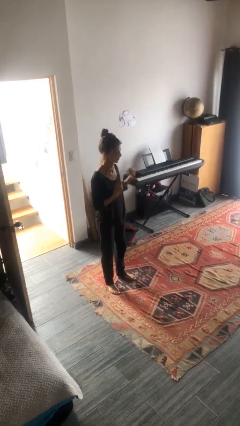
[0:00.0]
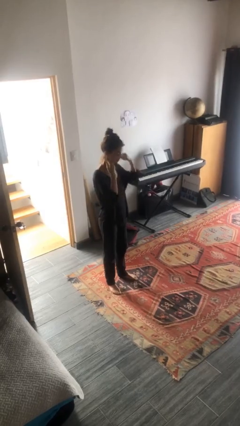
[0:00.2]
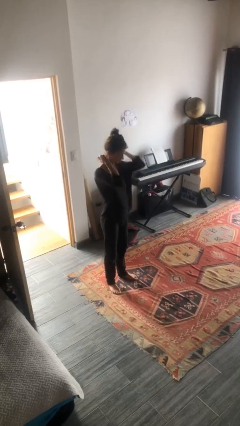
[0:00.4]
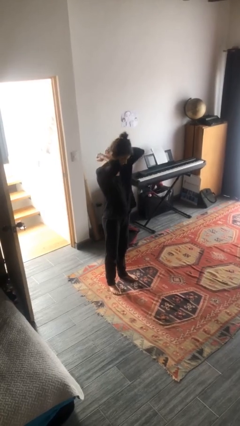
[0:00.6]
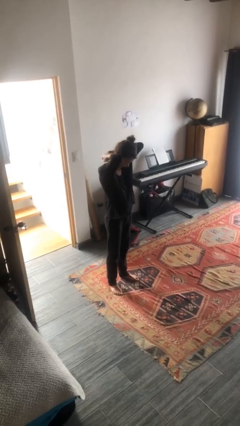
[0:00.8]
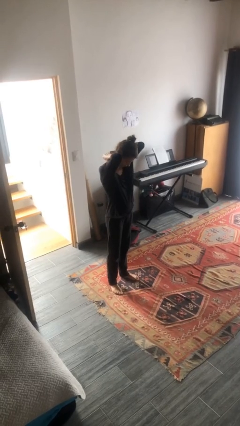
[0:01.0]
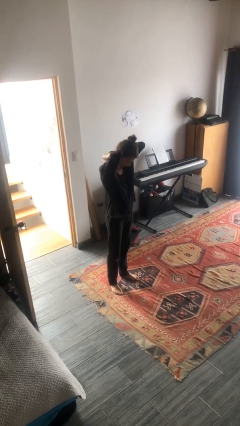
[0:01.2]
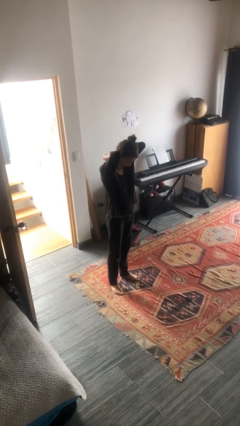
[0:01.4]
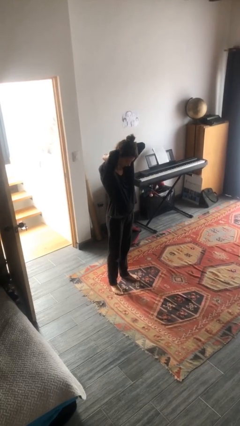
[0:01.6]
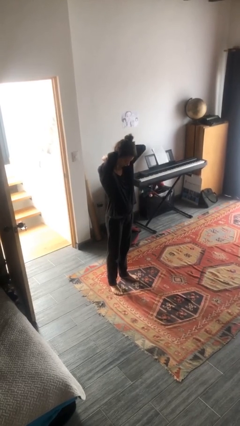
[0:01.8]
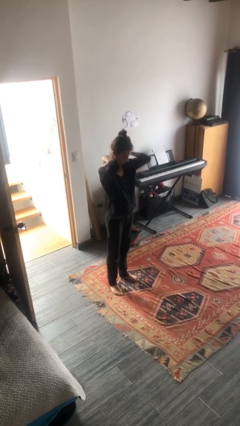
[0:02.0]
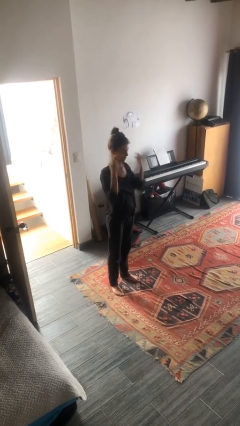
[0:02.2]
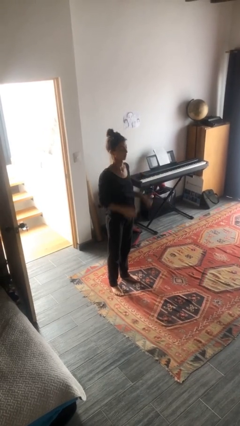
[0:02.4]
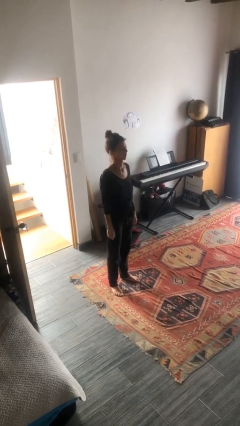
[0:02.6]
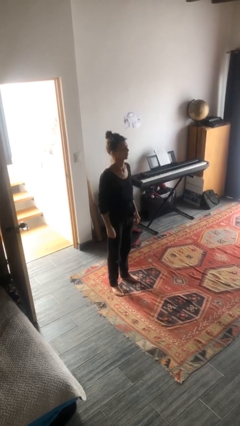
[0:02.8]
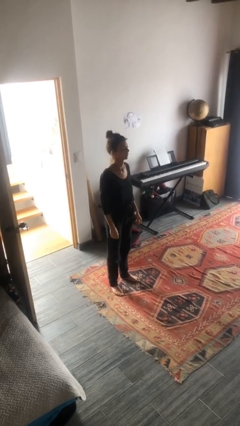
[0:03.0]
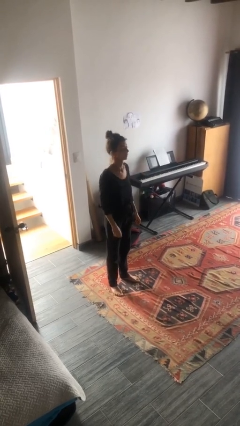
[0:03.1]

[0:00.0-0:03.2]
person puts on necklace

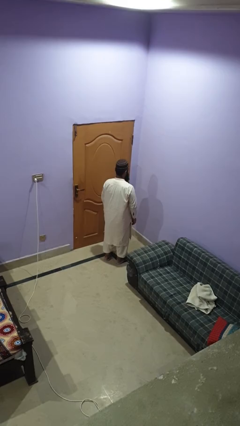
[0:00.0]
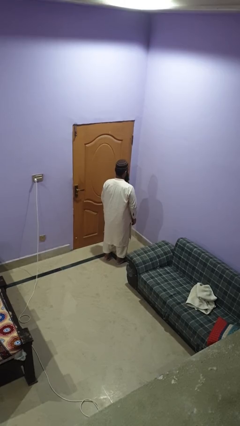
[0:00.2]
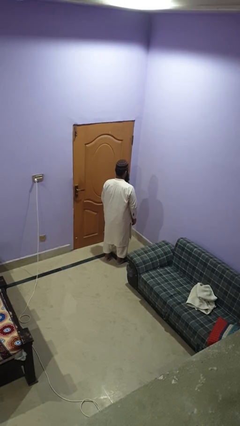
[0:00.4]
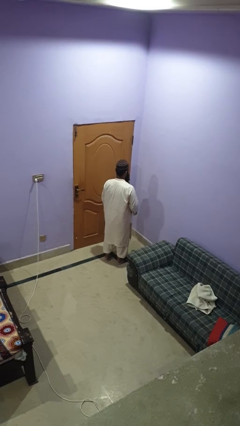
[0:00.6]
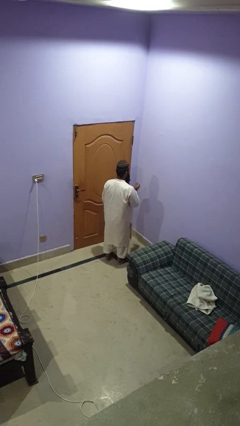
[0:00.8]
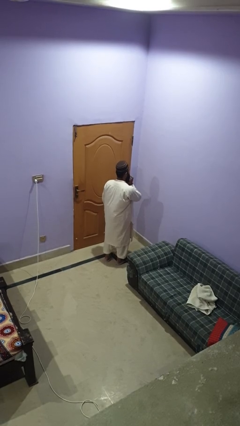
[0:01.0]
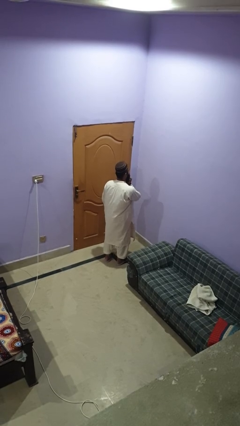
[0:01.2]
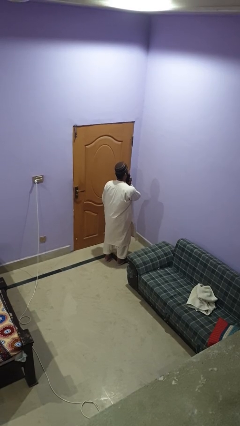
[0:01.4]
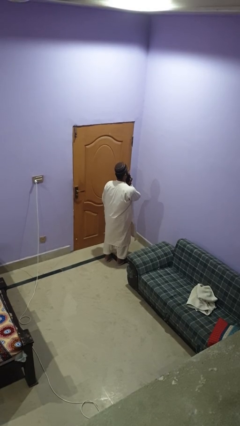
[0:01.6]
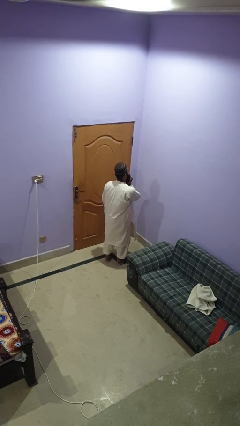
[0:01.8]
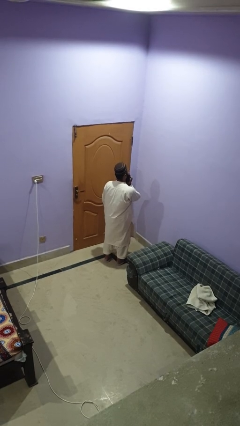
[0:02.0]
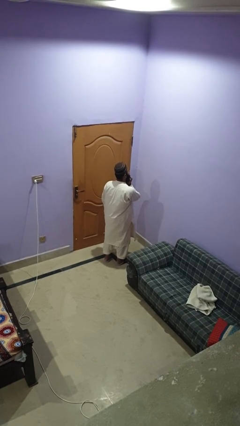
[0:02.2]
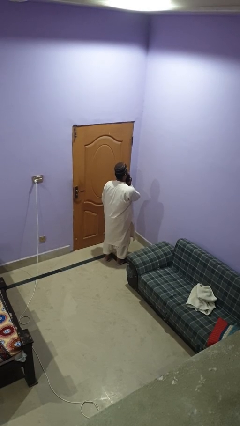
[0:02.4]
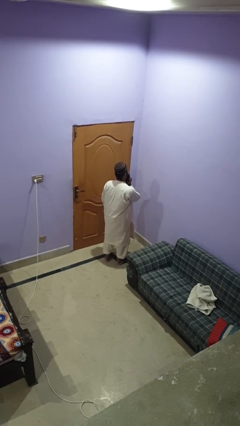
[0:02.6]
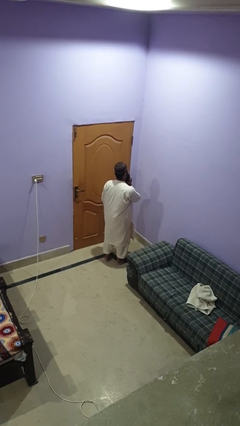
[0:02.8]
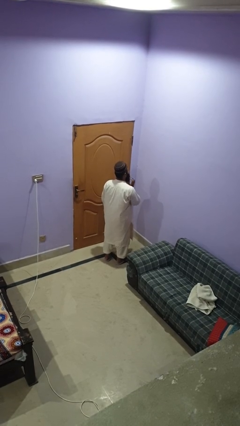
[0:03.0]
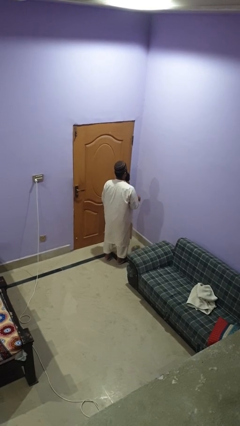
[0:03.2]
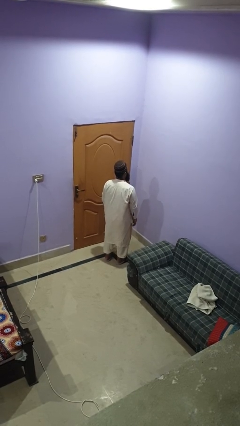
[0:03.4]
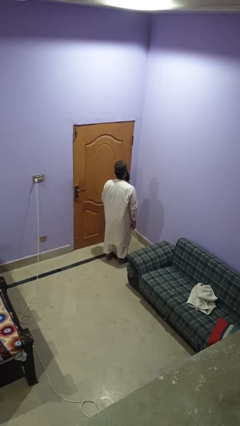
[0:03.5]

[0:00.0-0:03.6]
person strokes chin

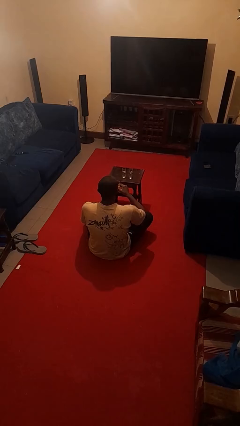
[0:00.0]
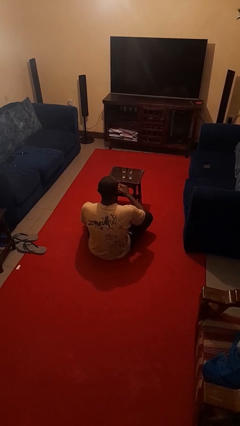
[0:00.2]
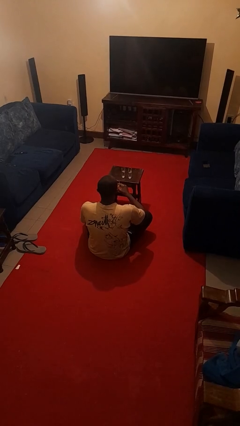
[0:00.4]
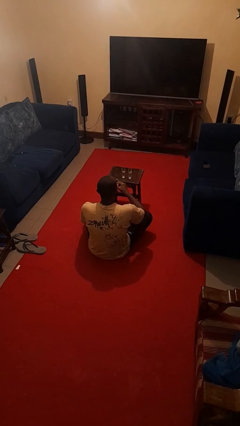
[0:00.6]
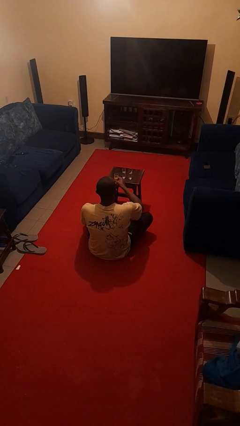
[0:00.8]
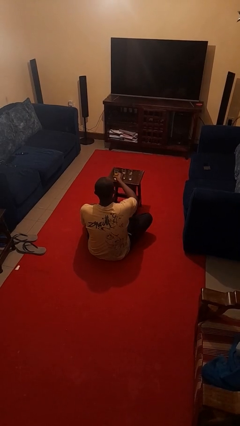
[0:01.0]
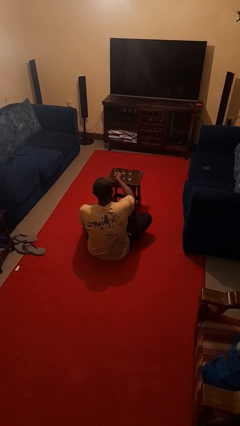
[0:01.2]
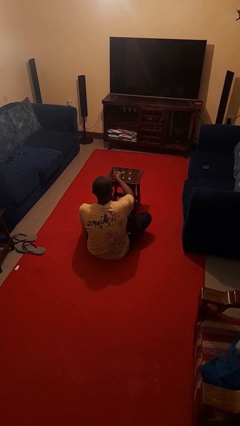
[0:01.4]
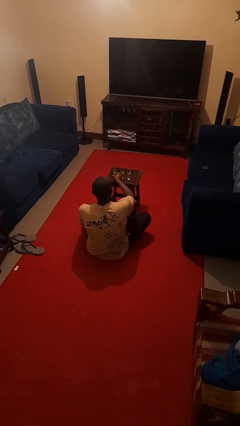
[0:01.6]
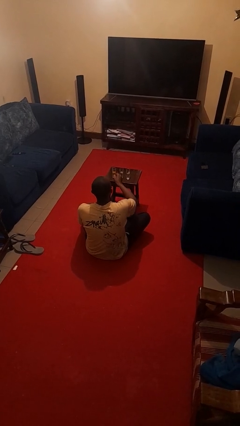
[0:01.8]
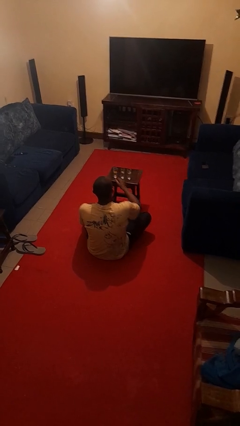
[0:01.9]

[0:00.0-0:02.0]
person puts down object on table

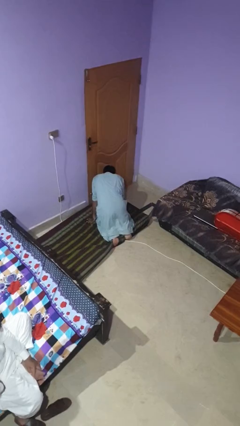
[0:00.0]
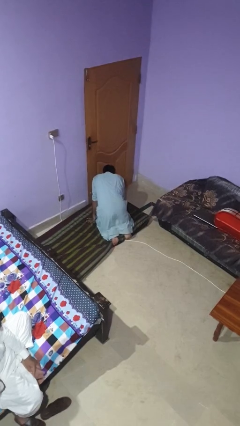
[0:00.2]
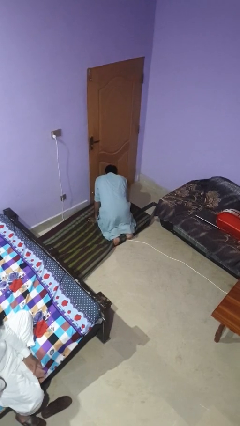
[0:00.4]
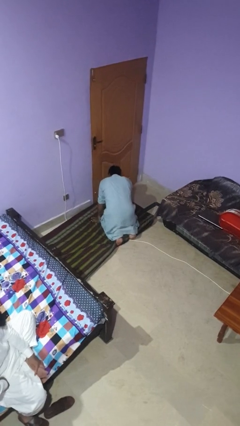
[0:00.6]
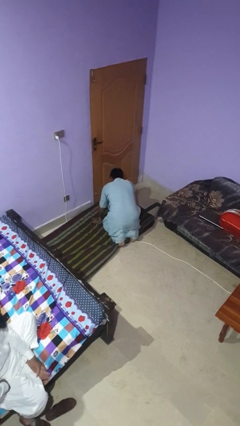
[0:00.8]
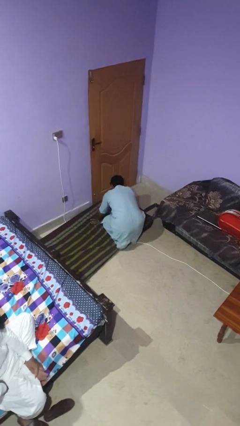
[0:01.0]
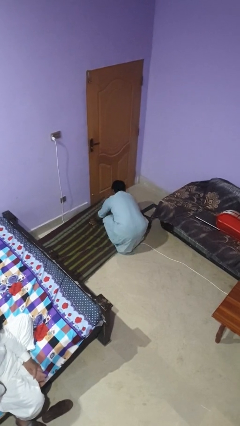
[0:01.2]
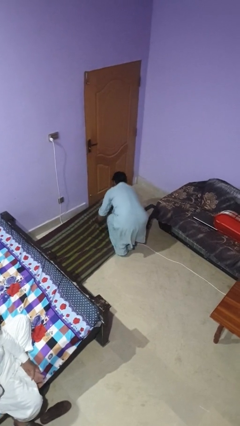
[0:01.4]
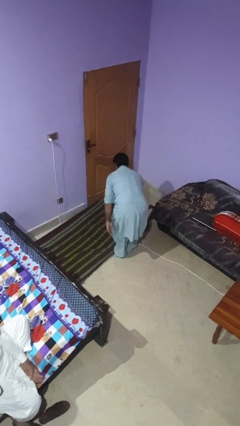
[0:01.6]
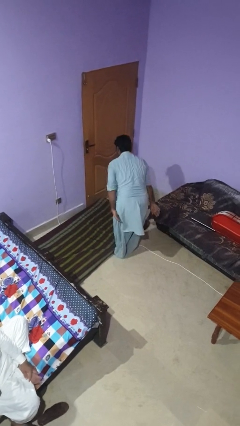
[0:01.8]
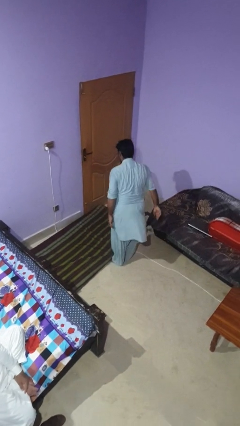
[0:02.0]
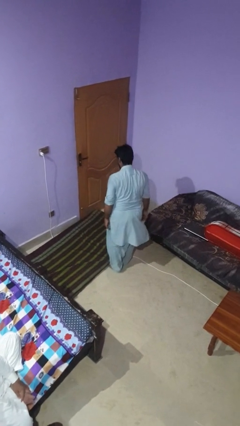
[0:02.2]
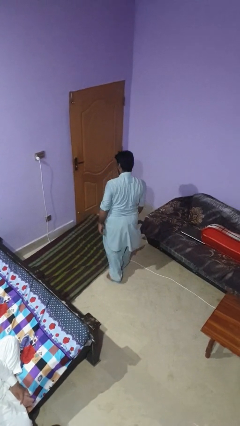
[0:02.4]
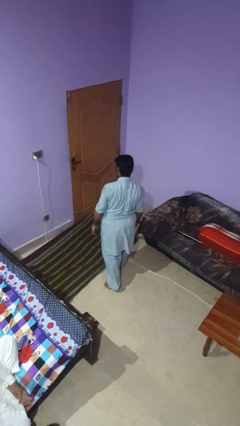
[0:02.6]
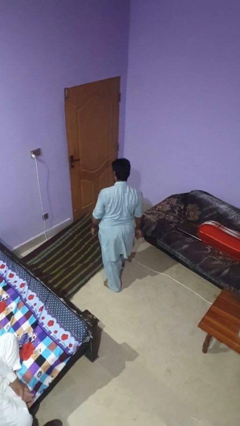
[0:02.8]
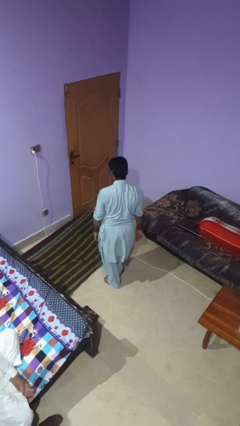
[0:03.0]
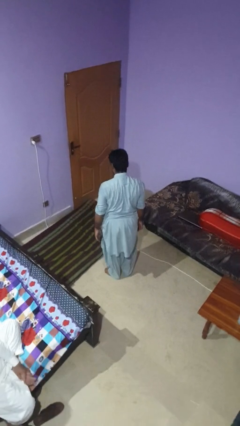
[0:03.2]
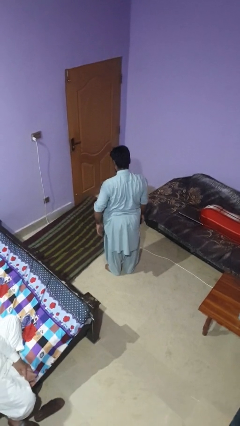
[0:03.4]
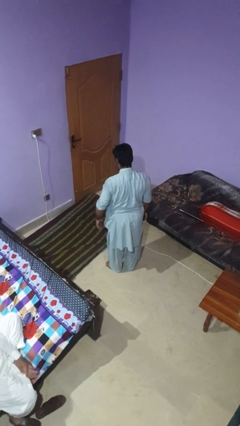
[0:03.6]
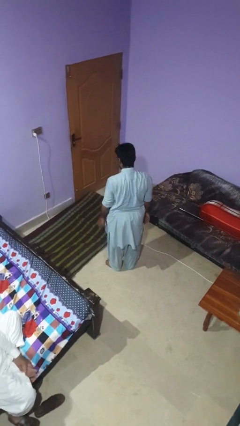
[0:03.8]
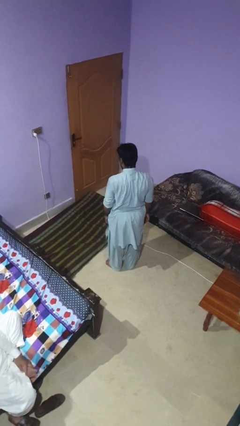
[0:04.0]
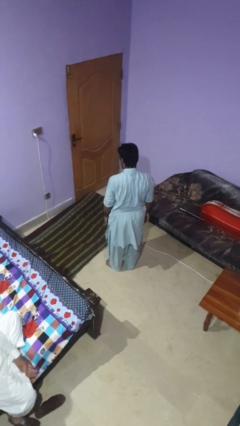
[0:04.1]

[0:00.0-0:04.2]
person stands up from floor

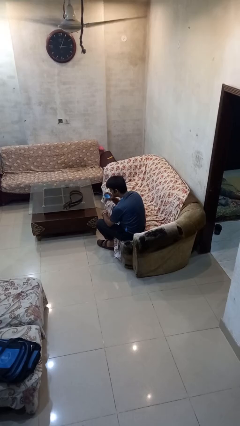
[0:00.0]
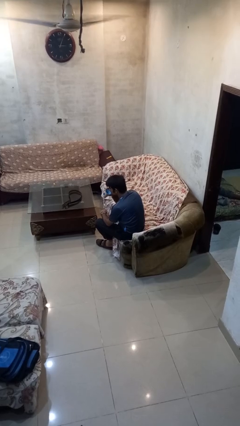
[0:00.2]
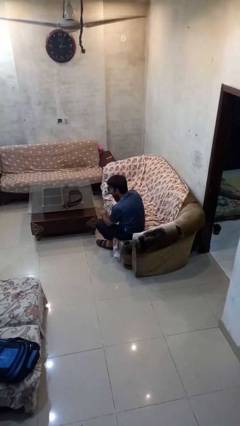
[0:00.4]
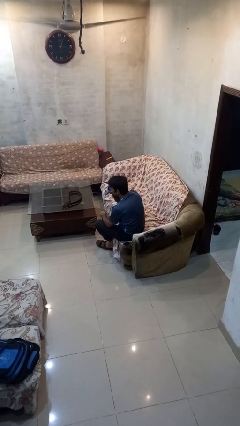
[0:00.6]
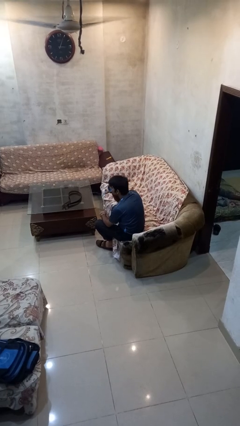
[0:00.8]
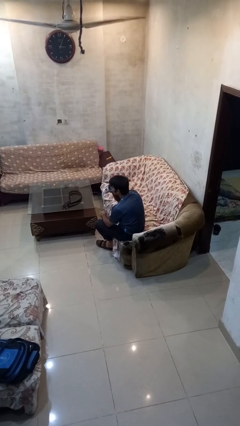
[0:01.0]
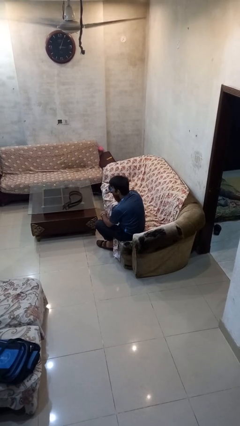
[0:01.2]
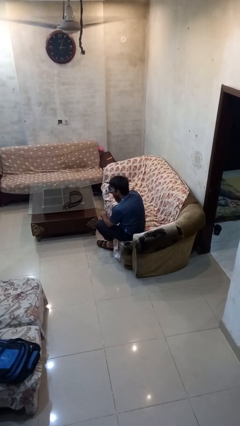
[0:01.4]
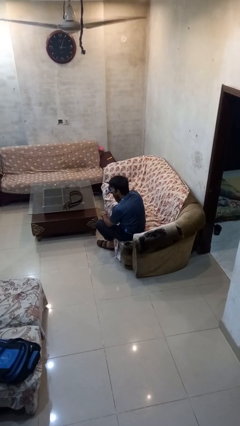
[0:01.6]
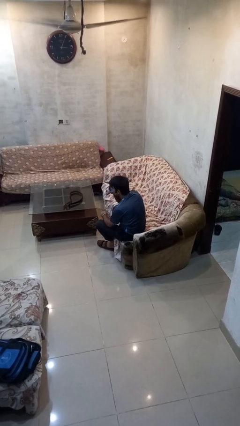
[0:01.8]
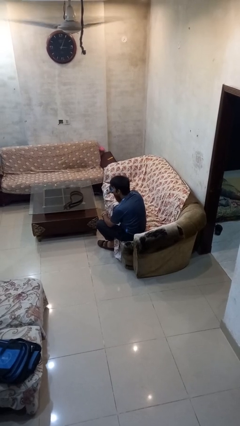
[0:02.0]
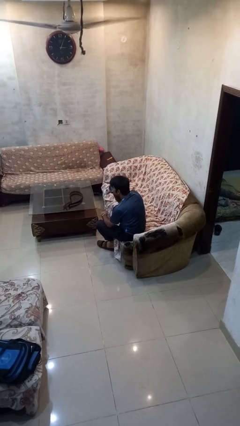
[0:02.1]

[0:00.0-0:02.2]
person drinks from mug

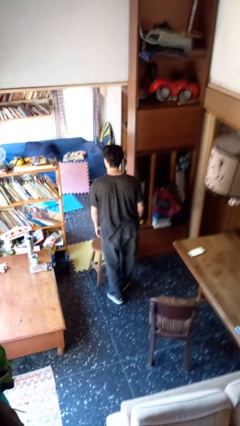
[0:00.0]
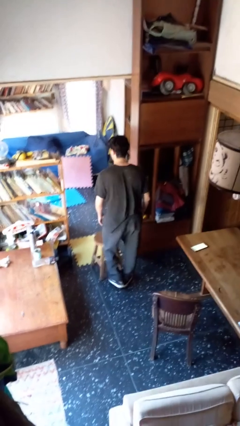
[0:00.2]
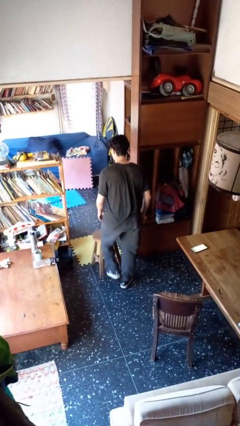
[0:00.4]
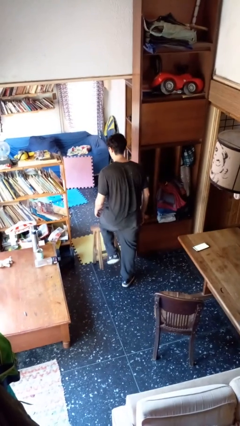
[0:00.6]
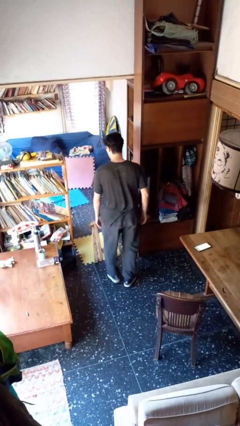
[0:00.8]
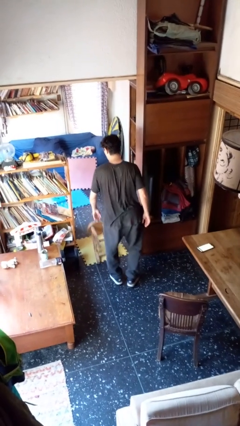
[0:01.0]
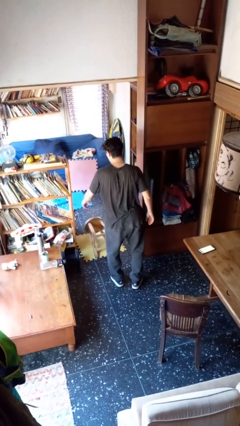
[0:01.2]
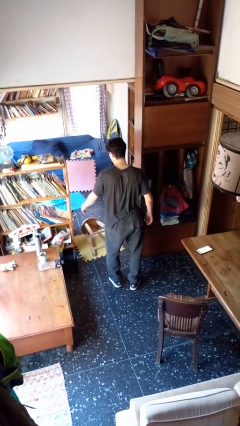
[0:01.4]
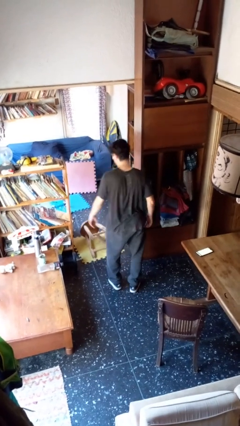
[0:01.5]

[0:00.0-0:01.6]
person knocks over furniture

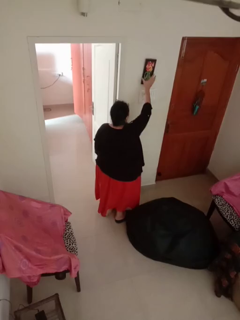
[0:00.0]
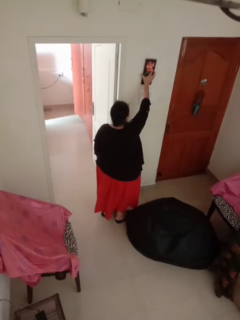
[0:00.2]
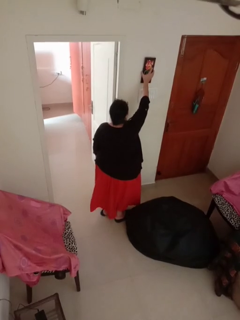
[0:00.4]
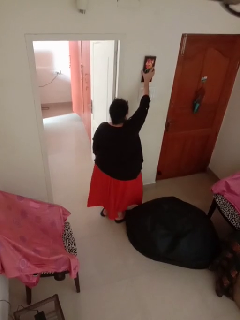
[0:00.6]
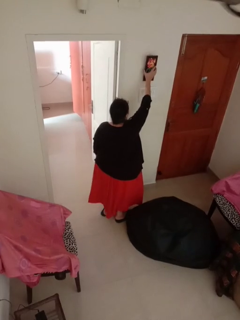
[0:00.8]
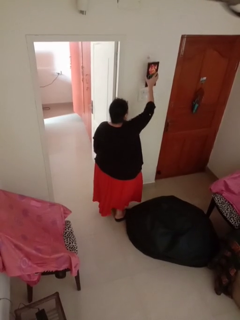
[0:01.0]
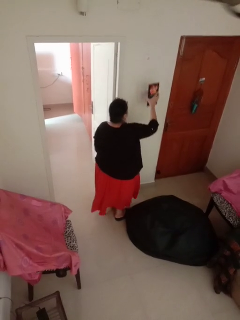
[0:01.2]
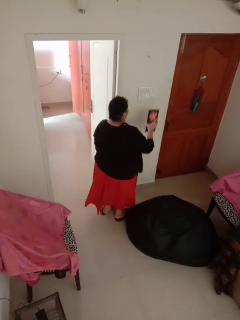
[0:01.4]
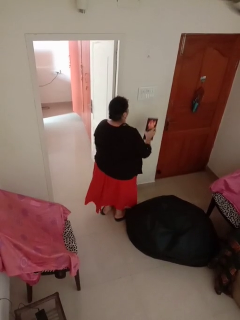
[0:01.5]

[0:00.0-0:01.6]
person takes down picture frame
